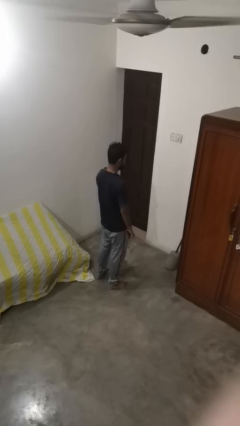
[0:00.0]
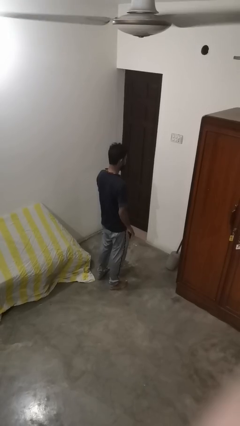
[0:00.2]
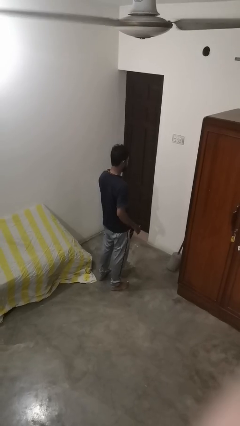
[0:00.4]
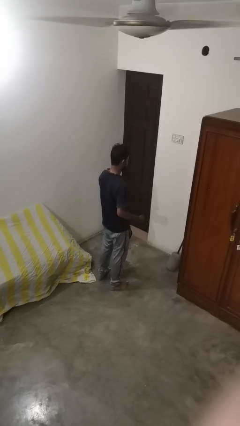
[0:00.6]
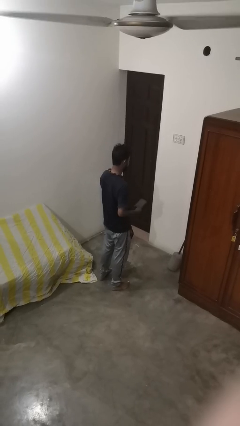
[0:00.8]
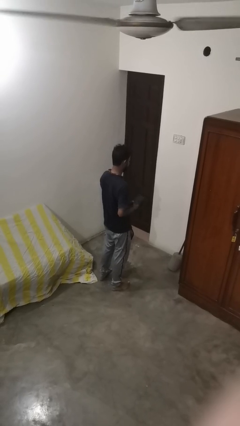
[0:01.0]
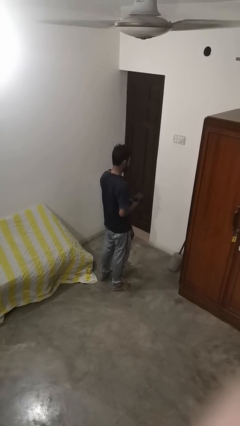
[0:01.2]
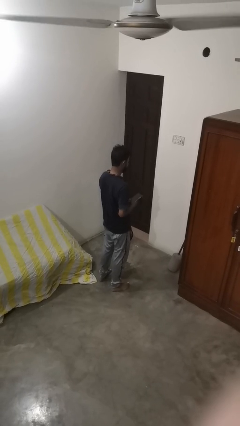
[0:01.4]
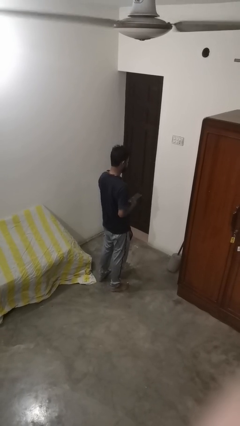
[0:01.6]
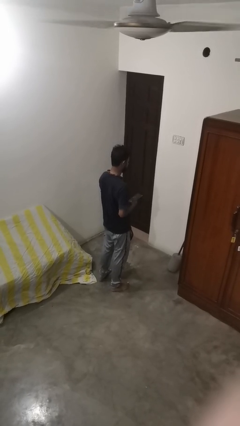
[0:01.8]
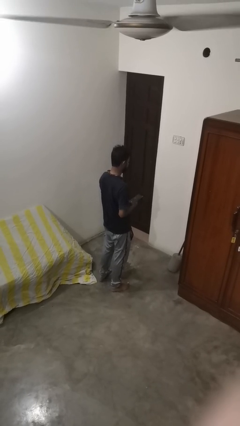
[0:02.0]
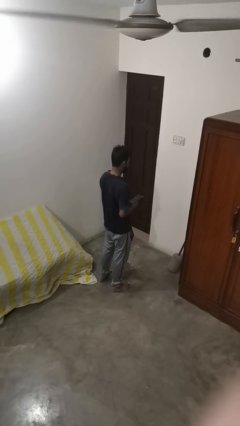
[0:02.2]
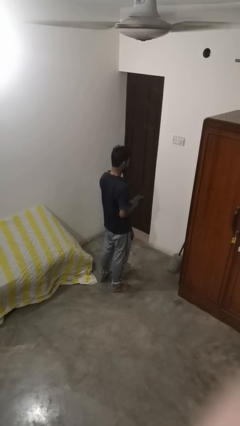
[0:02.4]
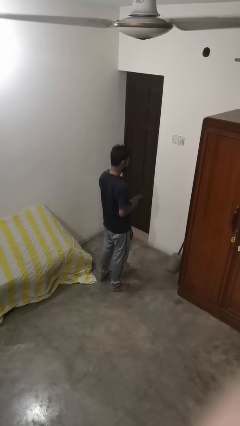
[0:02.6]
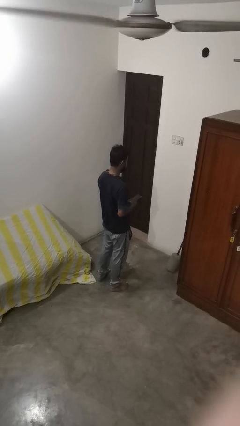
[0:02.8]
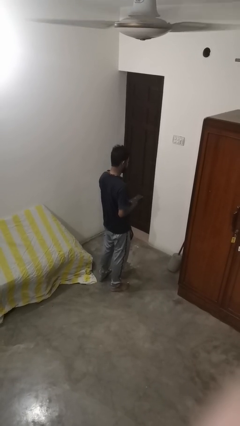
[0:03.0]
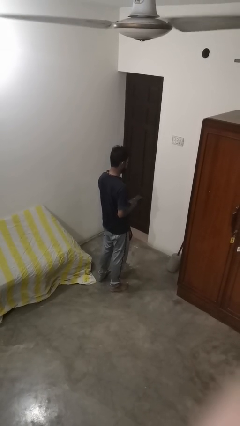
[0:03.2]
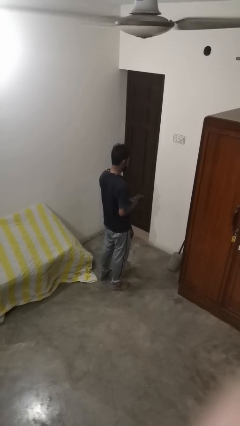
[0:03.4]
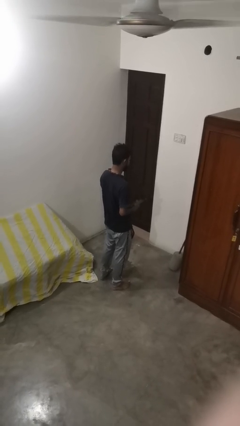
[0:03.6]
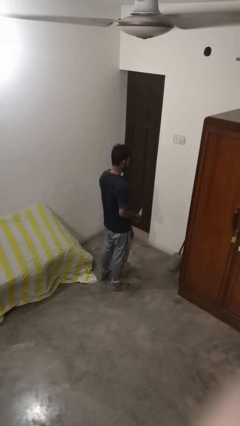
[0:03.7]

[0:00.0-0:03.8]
person takes phone from pocket

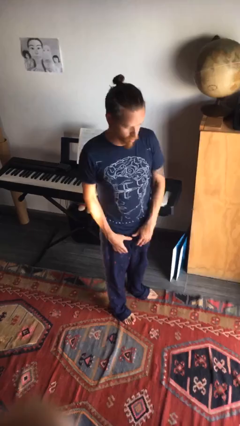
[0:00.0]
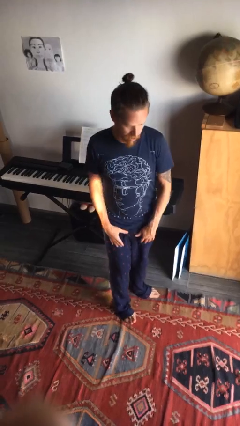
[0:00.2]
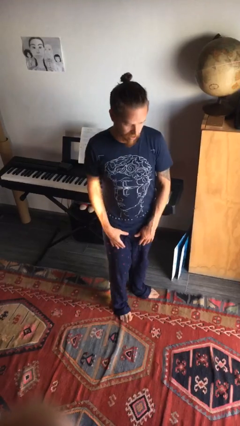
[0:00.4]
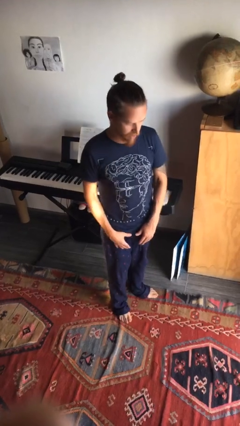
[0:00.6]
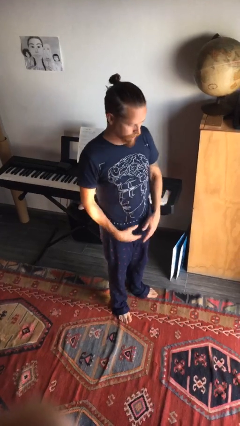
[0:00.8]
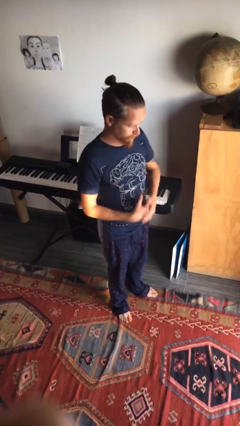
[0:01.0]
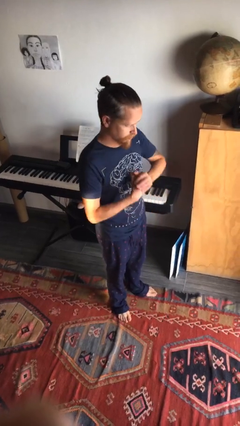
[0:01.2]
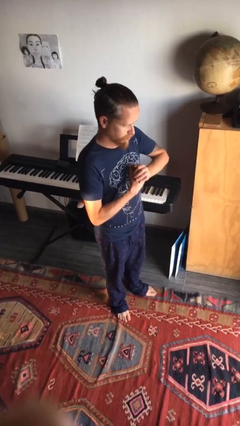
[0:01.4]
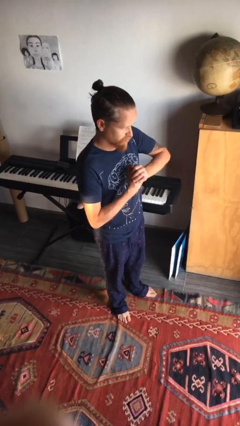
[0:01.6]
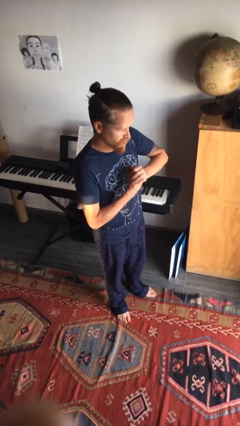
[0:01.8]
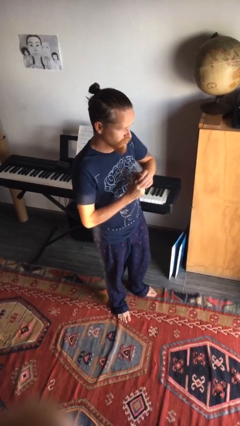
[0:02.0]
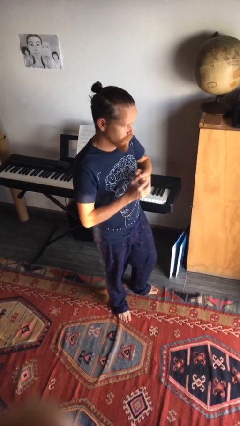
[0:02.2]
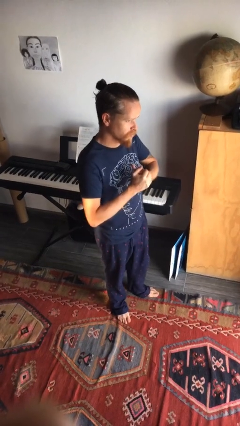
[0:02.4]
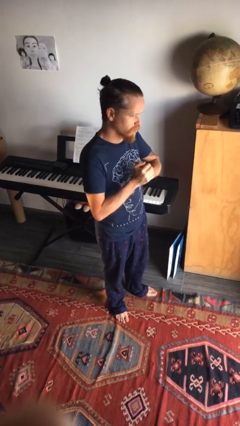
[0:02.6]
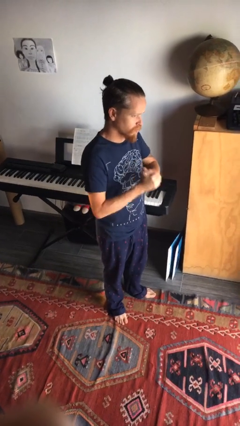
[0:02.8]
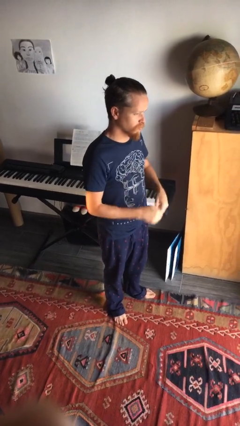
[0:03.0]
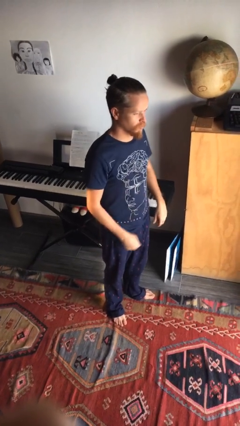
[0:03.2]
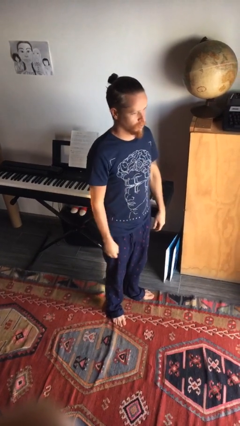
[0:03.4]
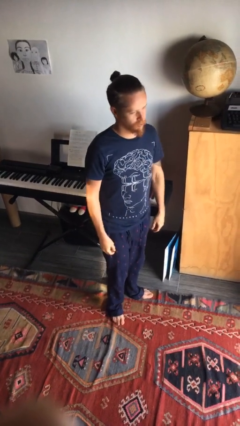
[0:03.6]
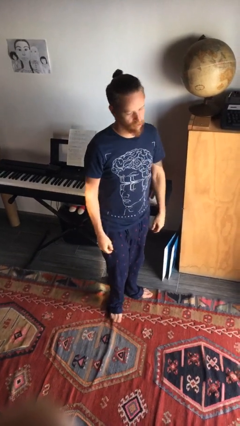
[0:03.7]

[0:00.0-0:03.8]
person cracks knuckles

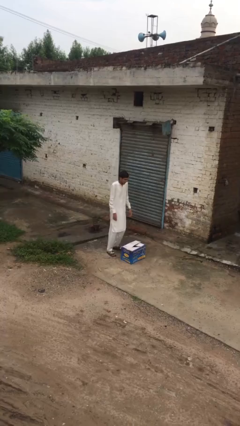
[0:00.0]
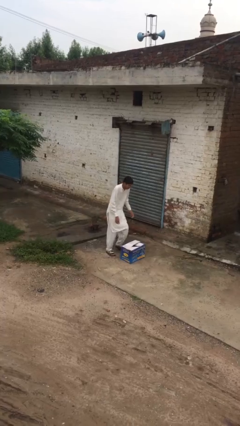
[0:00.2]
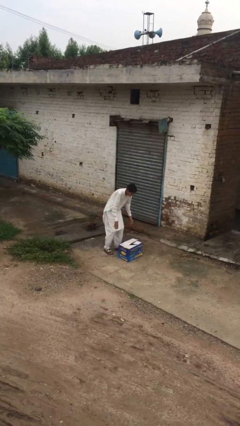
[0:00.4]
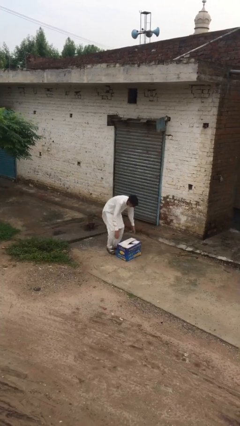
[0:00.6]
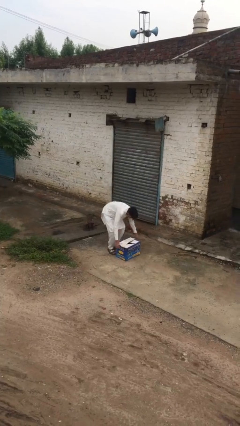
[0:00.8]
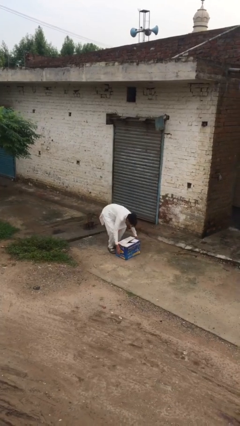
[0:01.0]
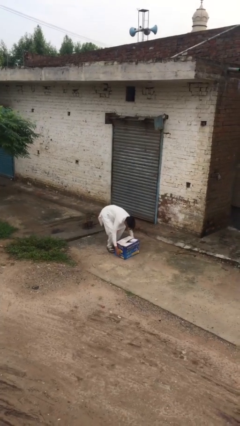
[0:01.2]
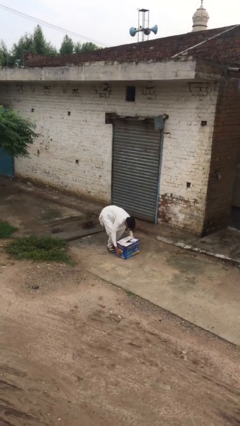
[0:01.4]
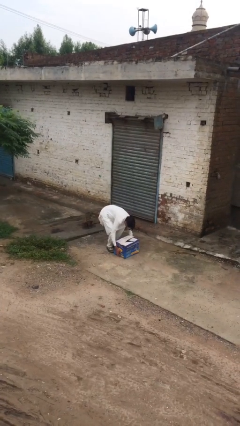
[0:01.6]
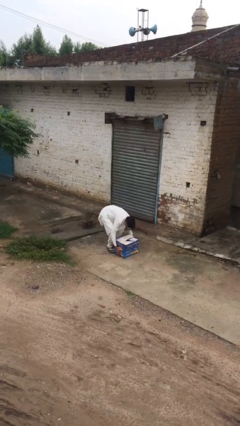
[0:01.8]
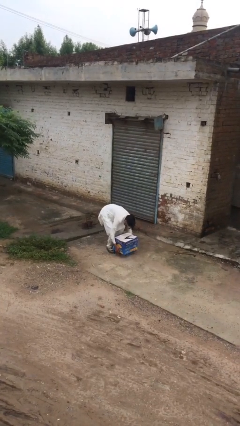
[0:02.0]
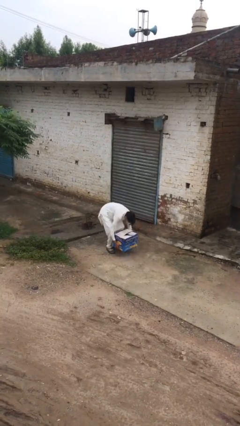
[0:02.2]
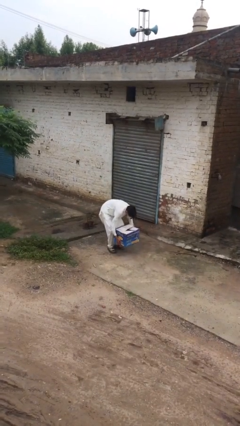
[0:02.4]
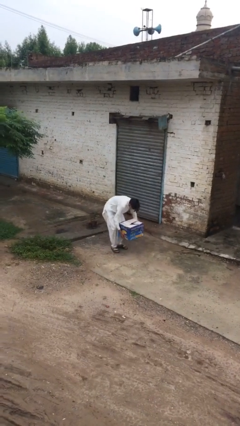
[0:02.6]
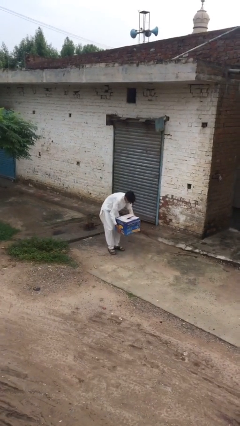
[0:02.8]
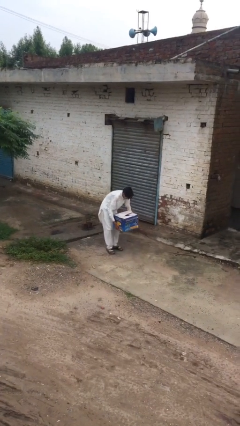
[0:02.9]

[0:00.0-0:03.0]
person picks up object from floor

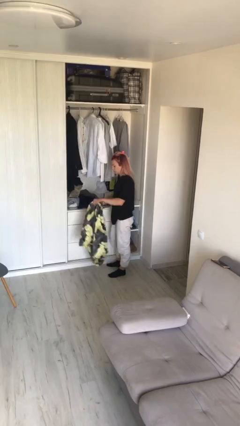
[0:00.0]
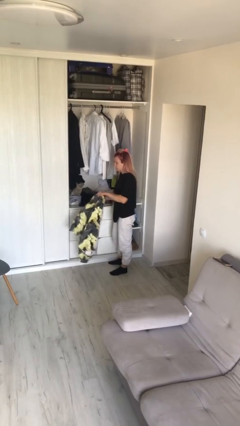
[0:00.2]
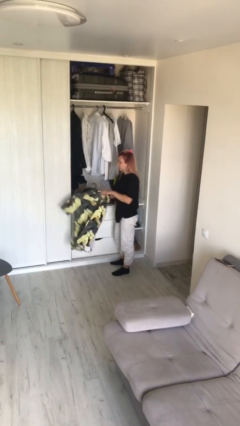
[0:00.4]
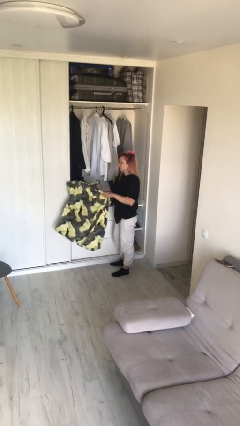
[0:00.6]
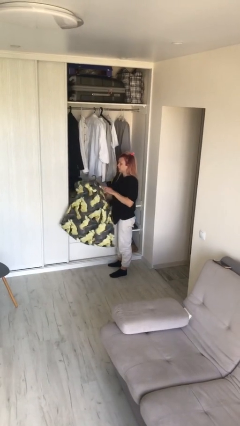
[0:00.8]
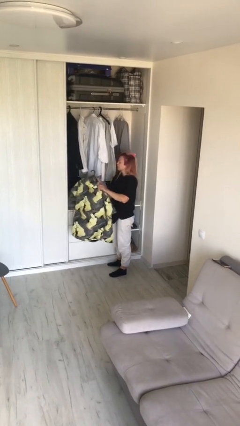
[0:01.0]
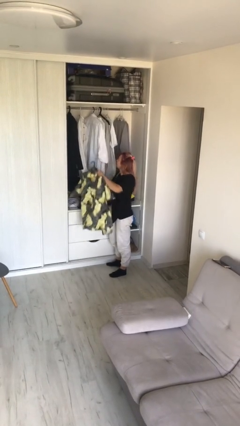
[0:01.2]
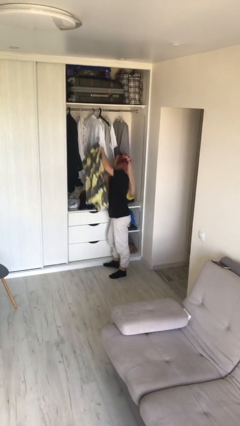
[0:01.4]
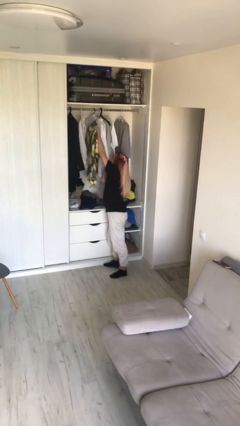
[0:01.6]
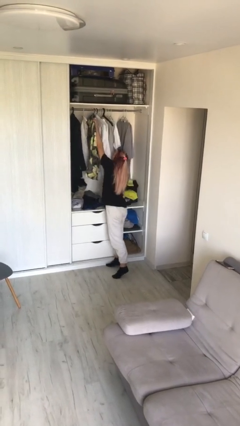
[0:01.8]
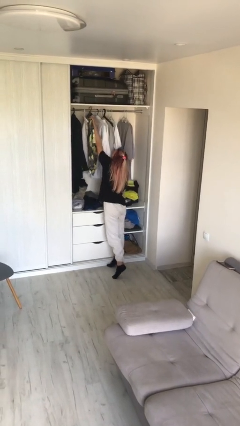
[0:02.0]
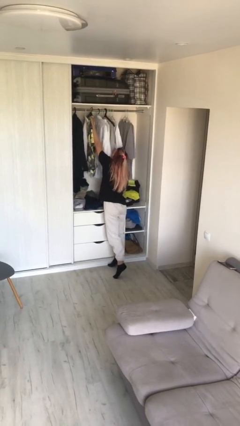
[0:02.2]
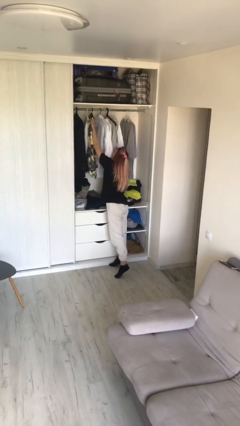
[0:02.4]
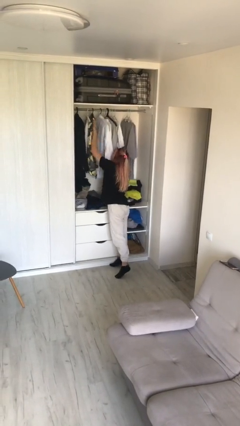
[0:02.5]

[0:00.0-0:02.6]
person puts clothes into closet

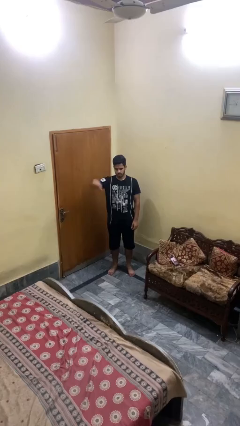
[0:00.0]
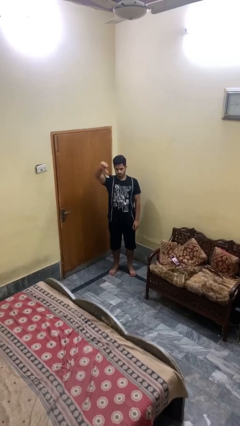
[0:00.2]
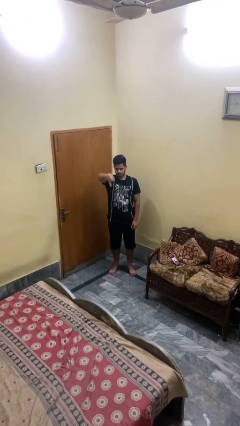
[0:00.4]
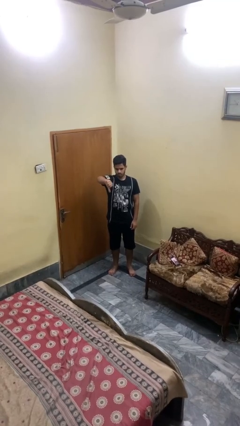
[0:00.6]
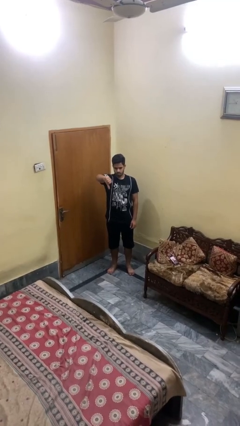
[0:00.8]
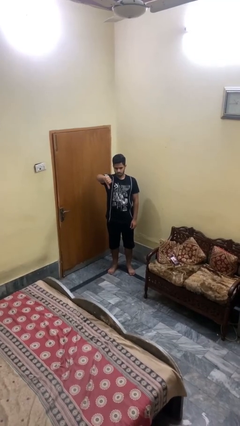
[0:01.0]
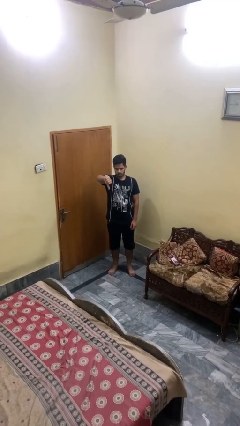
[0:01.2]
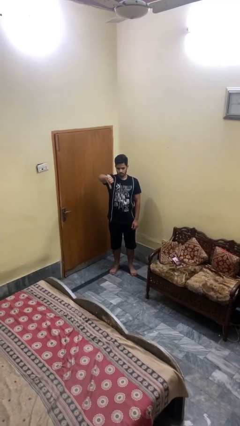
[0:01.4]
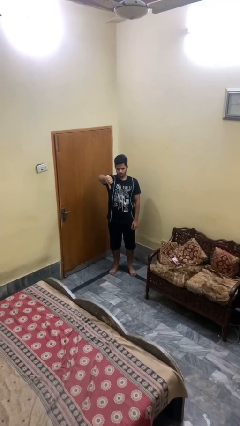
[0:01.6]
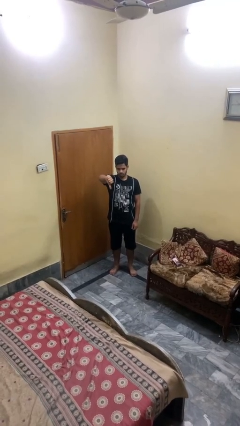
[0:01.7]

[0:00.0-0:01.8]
person gestures thumbs down

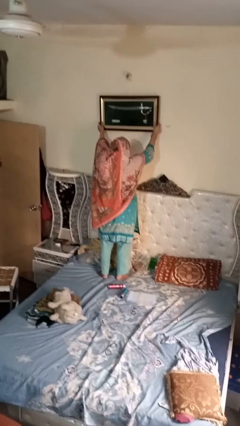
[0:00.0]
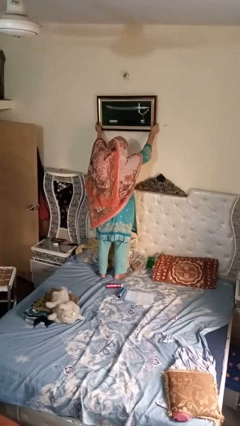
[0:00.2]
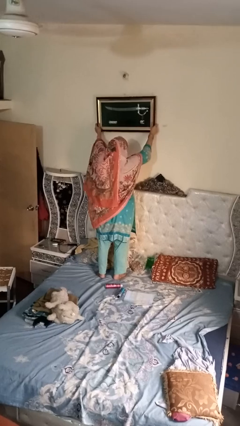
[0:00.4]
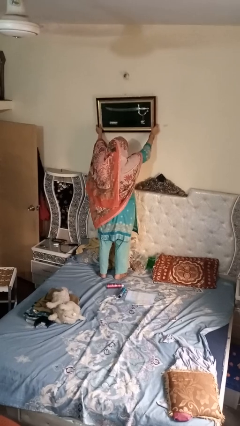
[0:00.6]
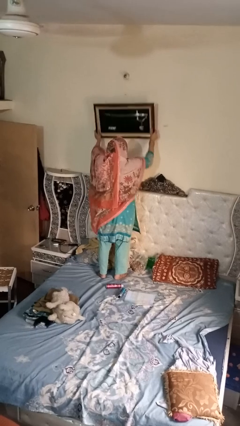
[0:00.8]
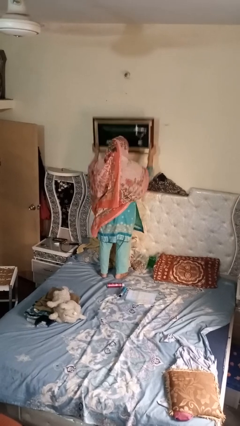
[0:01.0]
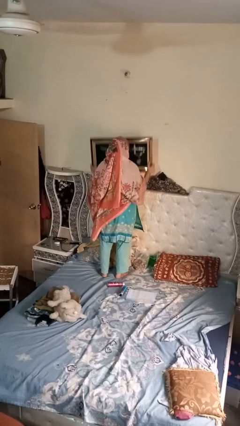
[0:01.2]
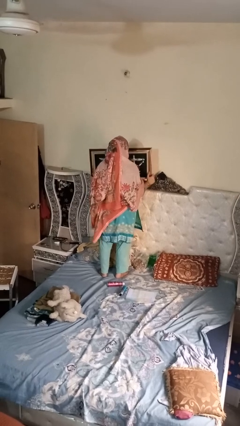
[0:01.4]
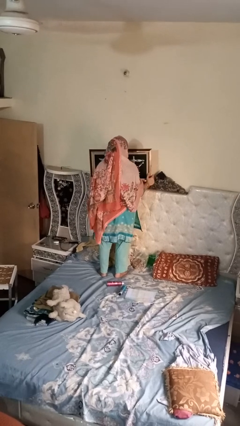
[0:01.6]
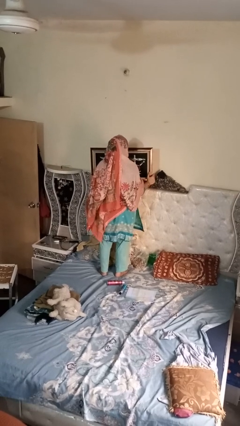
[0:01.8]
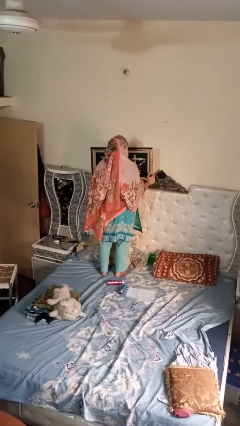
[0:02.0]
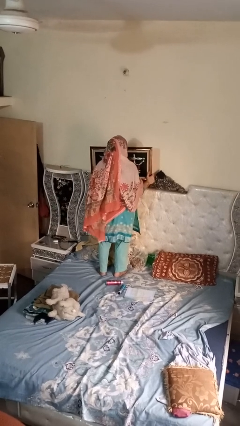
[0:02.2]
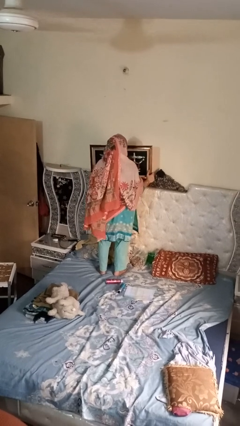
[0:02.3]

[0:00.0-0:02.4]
person puts up picture frame
